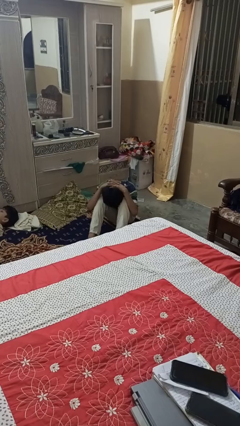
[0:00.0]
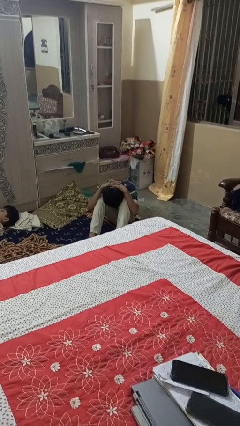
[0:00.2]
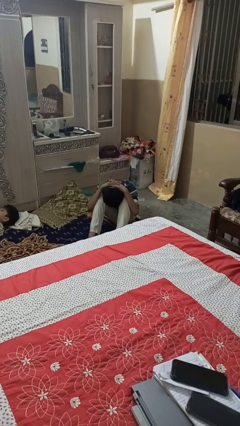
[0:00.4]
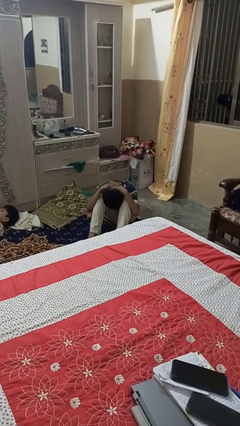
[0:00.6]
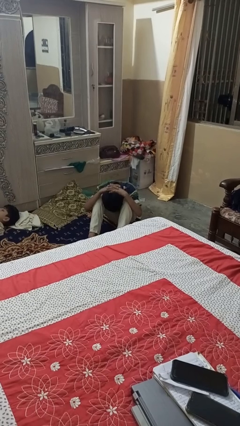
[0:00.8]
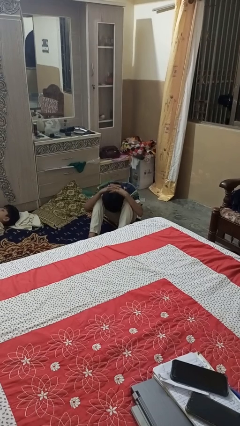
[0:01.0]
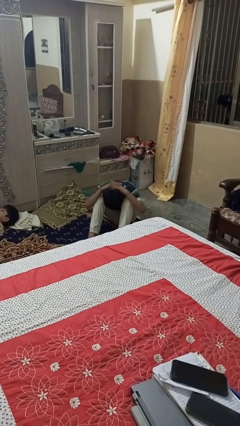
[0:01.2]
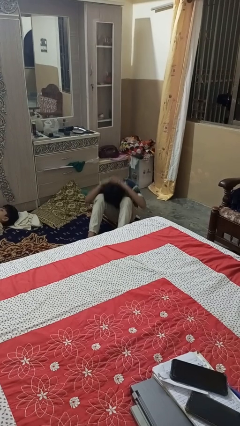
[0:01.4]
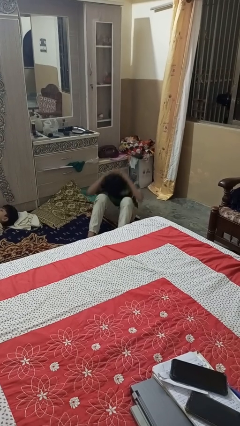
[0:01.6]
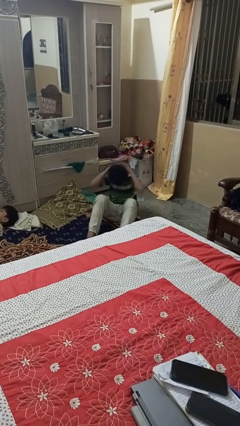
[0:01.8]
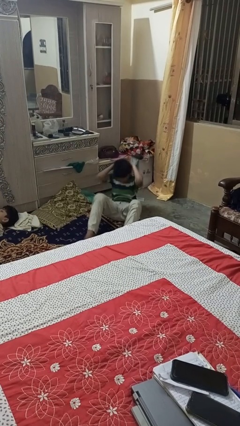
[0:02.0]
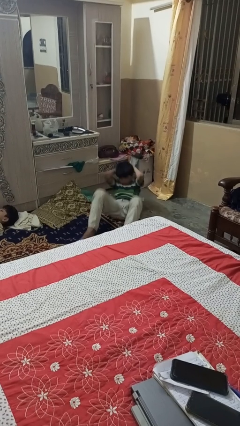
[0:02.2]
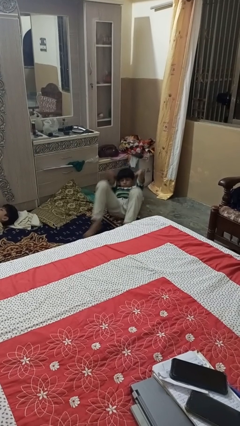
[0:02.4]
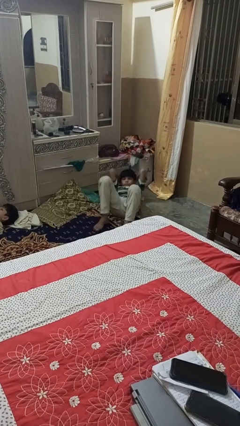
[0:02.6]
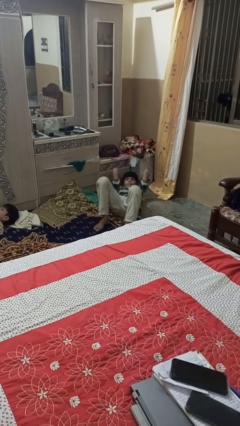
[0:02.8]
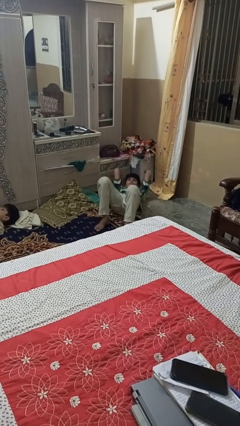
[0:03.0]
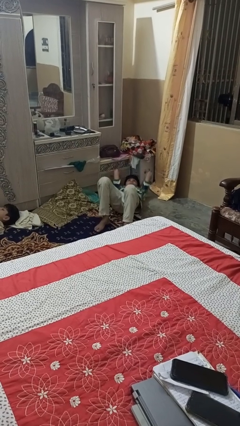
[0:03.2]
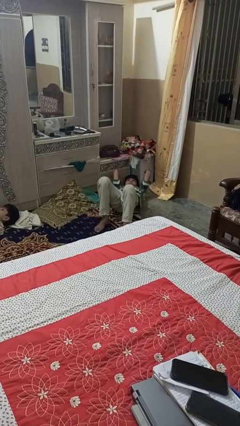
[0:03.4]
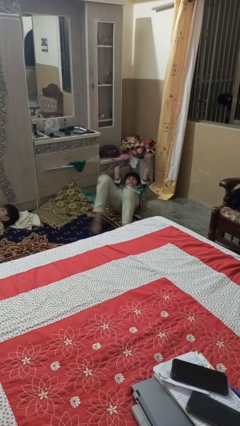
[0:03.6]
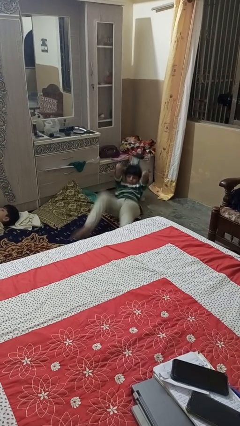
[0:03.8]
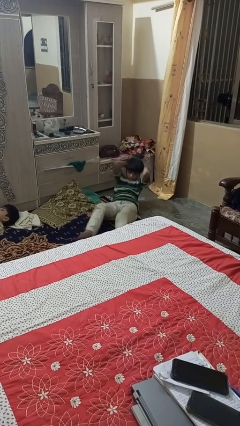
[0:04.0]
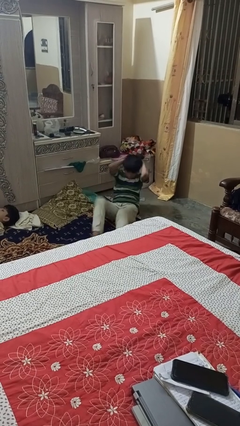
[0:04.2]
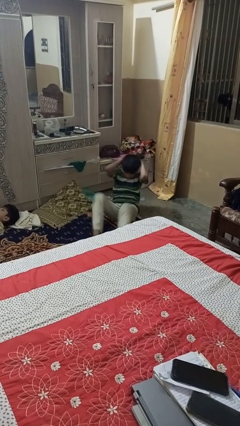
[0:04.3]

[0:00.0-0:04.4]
person exercises with situp

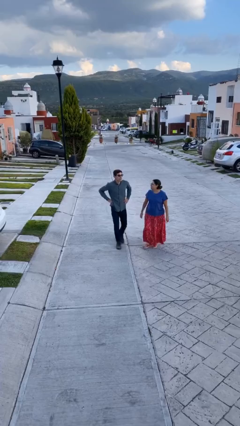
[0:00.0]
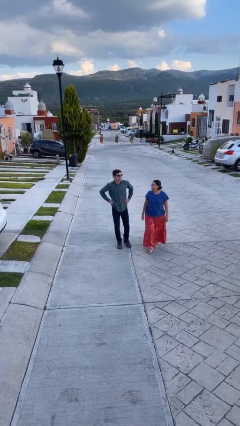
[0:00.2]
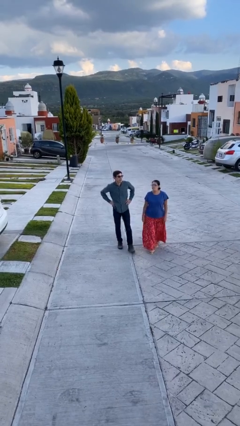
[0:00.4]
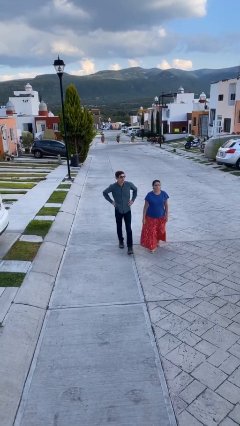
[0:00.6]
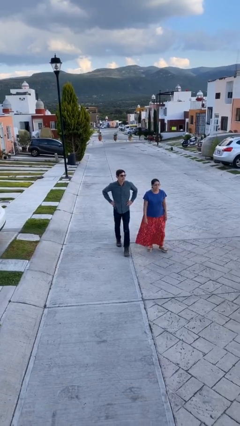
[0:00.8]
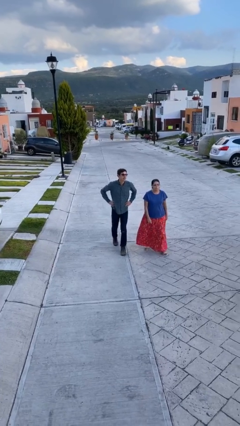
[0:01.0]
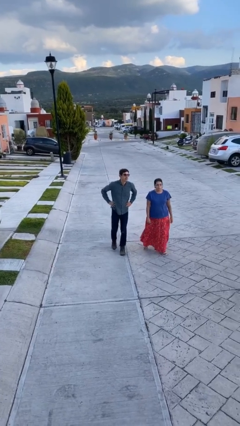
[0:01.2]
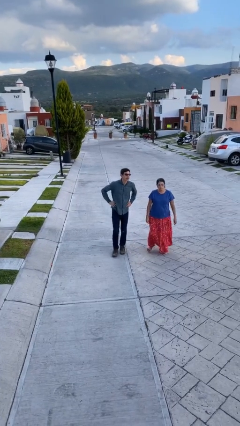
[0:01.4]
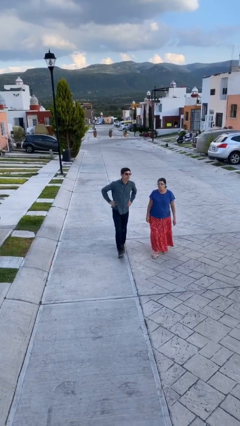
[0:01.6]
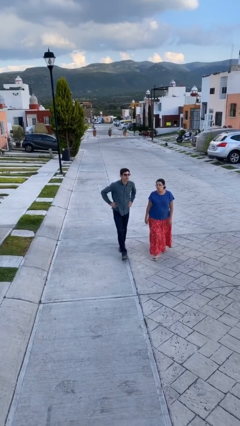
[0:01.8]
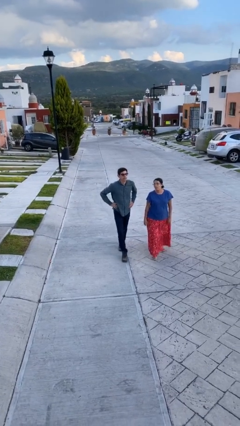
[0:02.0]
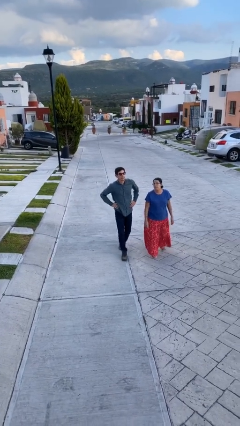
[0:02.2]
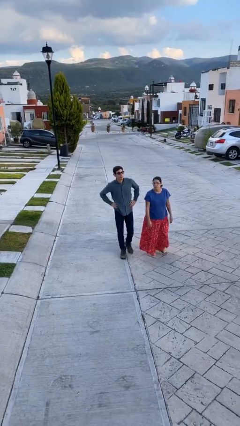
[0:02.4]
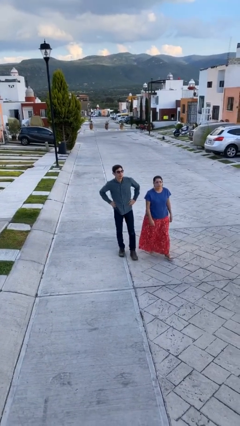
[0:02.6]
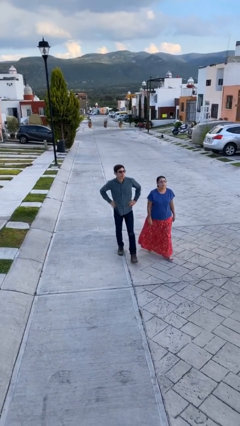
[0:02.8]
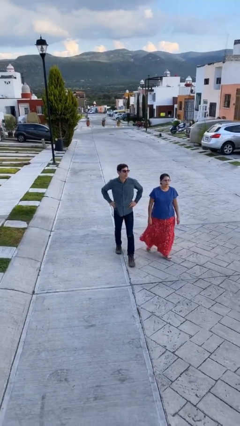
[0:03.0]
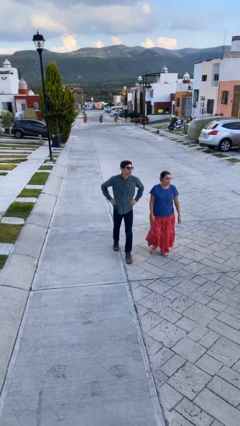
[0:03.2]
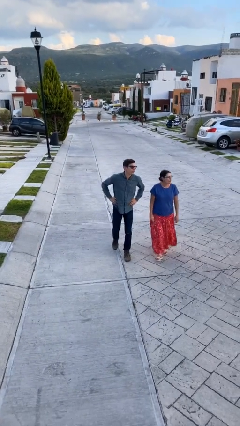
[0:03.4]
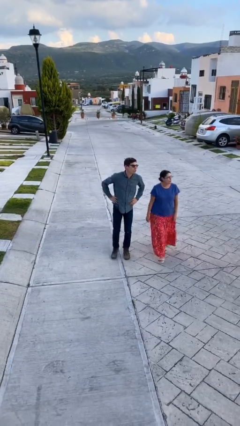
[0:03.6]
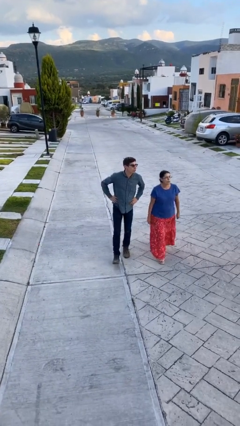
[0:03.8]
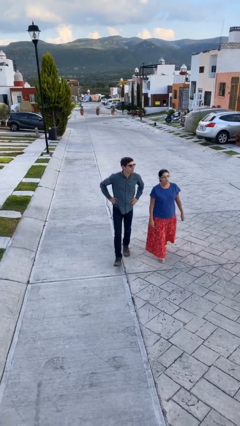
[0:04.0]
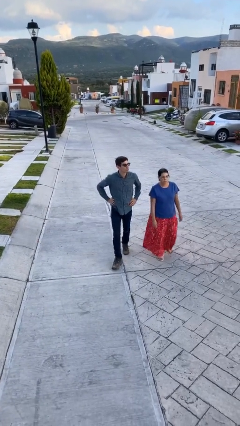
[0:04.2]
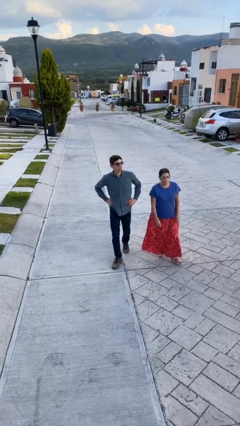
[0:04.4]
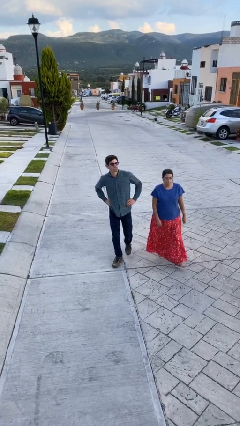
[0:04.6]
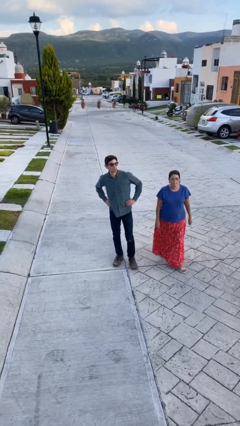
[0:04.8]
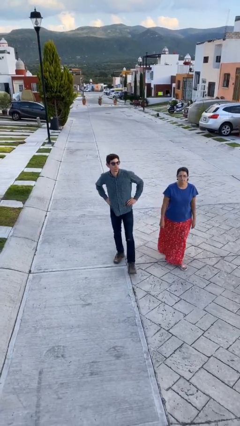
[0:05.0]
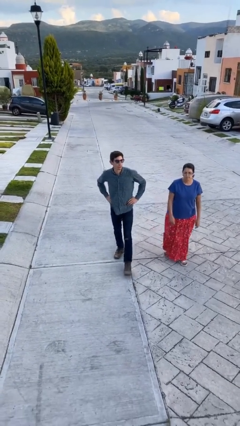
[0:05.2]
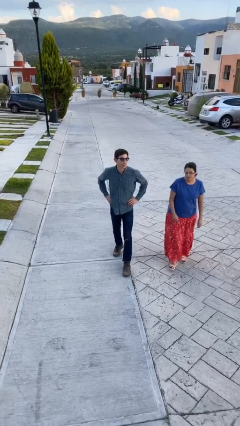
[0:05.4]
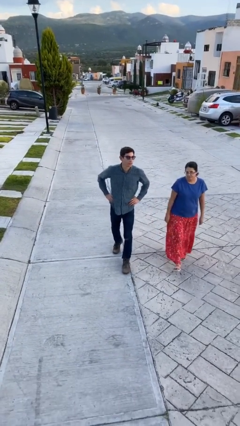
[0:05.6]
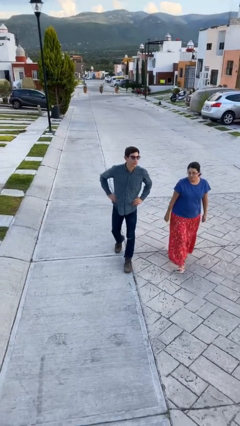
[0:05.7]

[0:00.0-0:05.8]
person talks to person

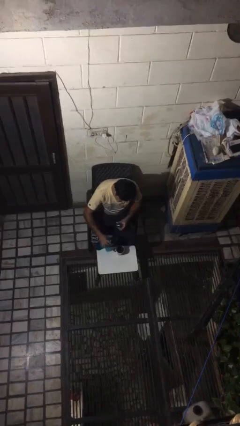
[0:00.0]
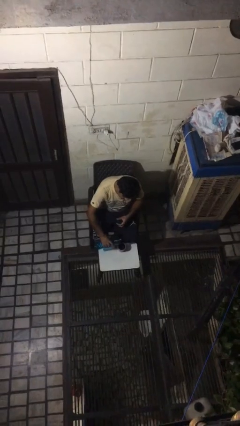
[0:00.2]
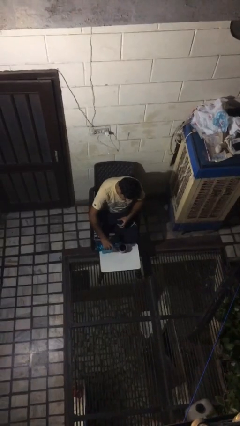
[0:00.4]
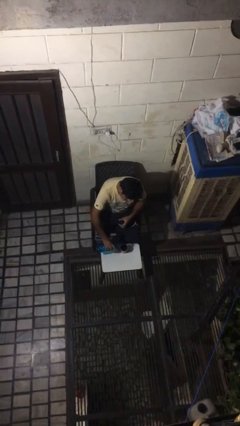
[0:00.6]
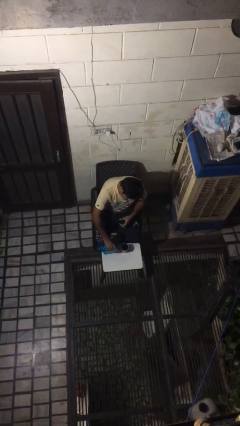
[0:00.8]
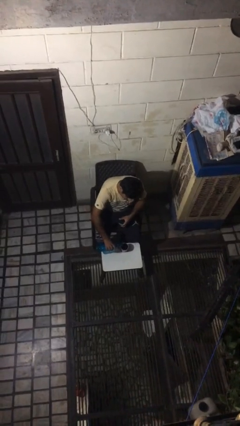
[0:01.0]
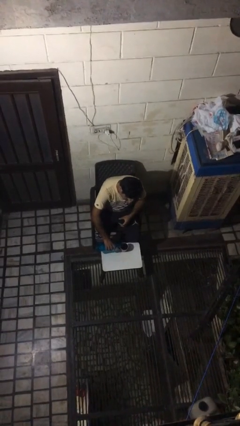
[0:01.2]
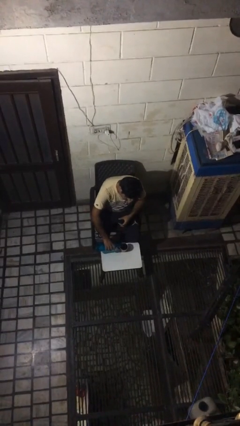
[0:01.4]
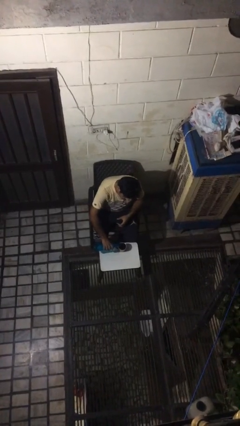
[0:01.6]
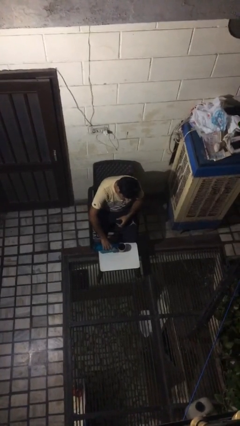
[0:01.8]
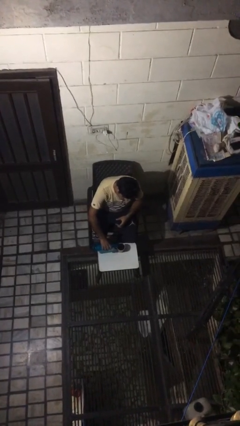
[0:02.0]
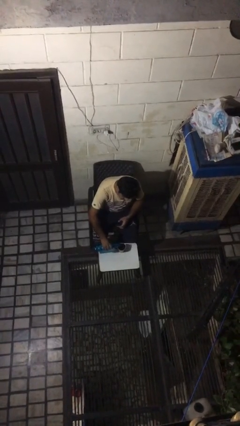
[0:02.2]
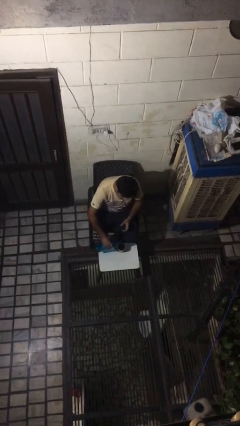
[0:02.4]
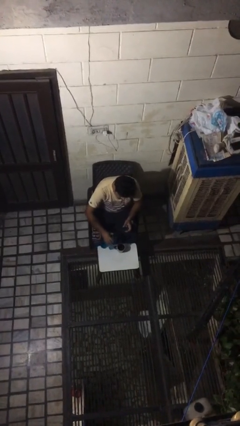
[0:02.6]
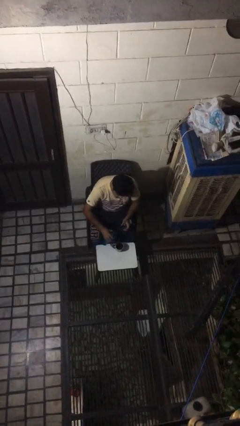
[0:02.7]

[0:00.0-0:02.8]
person pours liquid into cup

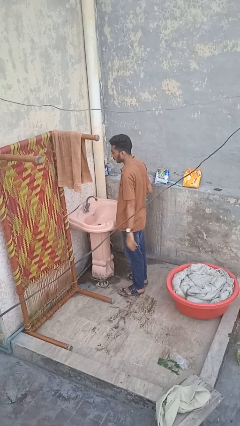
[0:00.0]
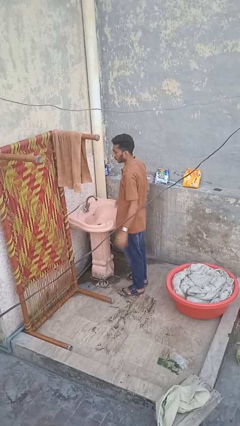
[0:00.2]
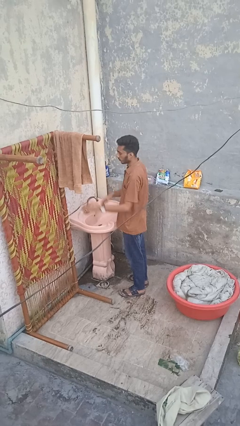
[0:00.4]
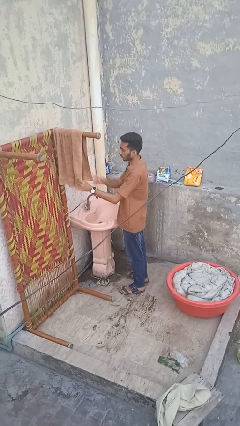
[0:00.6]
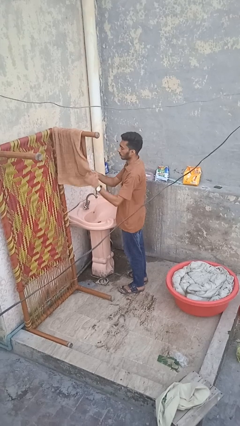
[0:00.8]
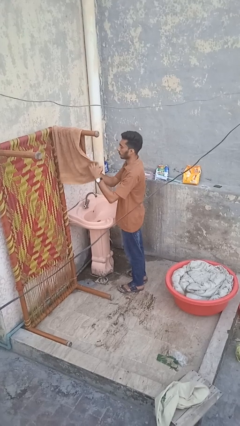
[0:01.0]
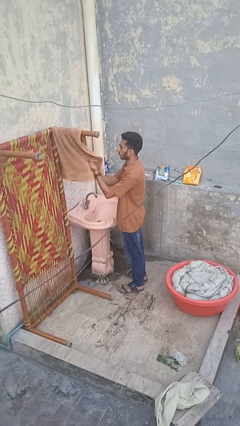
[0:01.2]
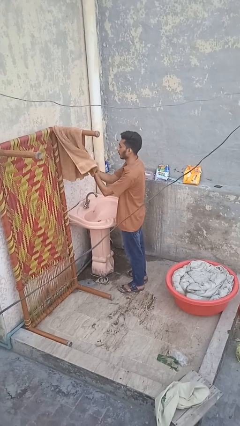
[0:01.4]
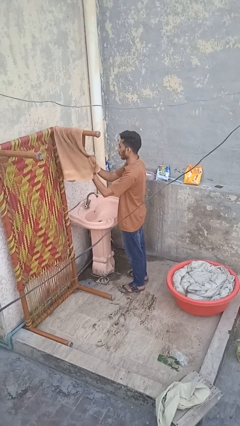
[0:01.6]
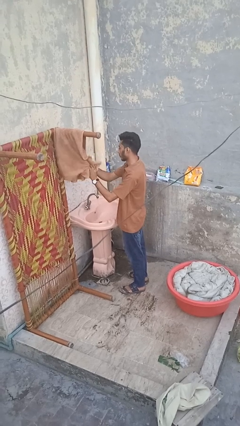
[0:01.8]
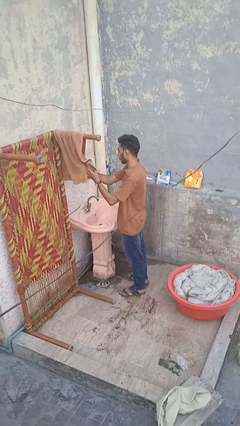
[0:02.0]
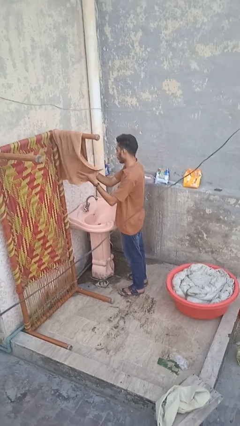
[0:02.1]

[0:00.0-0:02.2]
person dries hands with towel

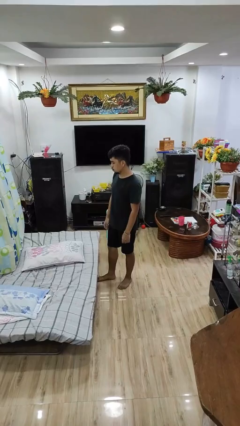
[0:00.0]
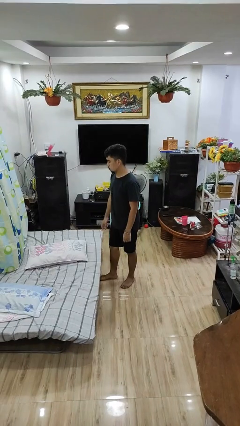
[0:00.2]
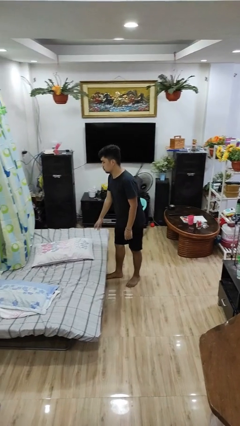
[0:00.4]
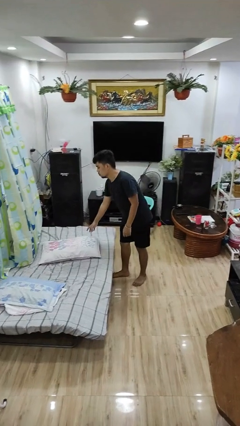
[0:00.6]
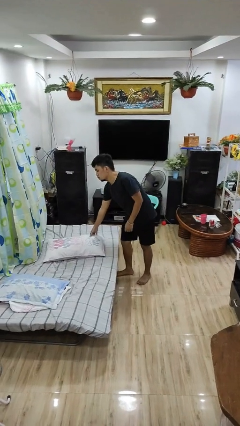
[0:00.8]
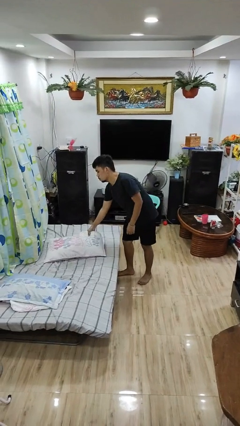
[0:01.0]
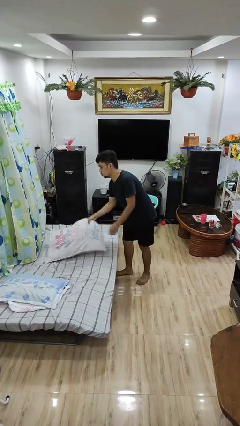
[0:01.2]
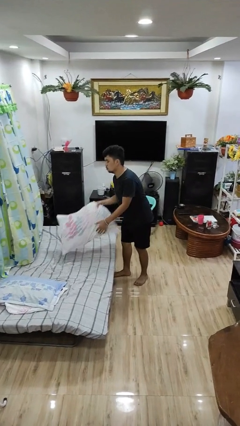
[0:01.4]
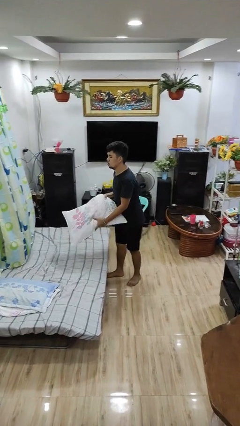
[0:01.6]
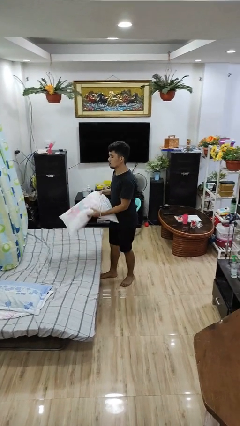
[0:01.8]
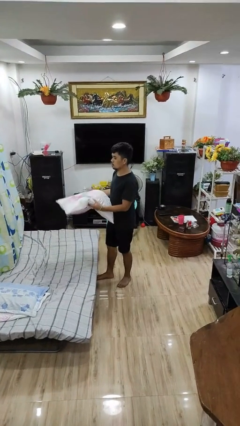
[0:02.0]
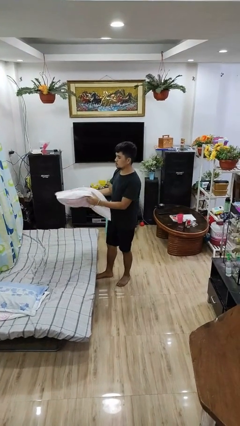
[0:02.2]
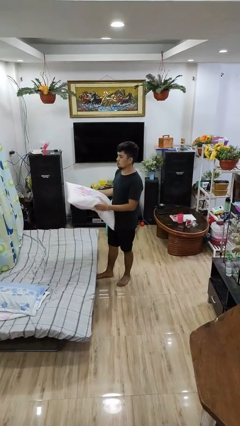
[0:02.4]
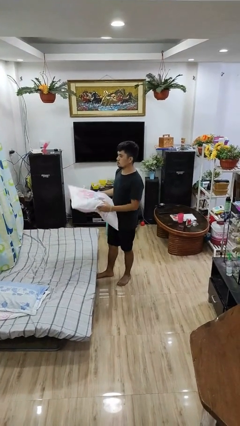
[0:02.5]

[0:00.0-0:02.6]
person picks up object from bed

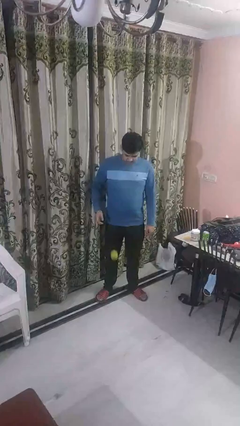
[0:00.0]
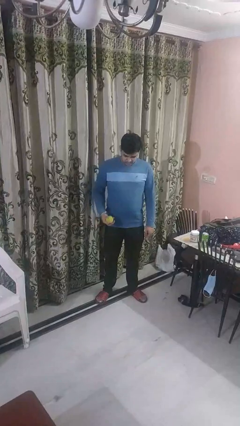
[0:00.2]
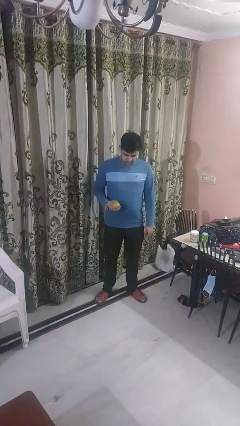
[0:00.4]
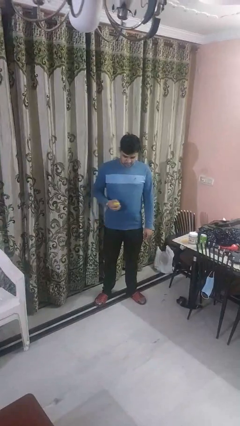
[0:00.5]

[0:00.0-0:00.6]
person bounces ball on floor
